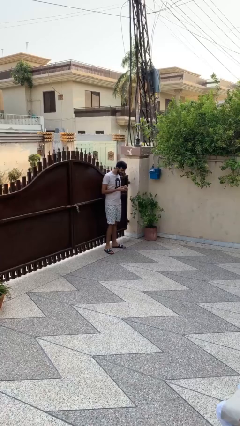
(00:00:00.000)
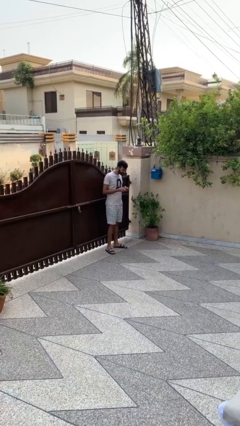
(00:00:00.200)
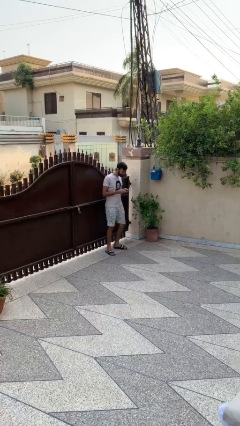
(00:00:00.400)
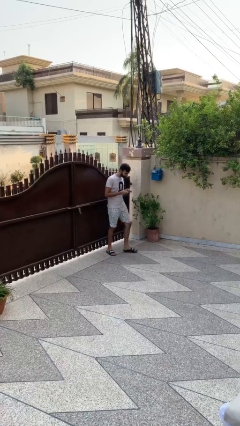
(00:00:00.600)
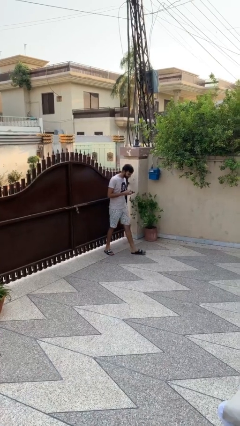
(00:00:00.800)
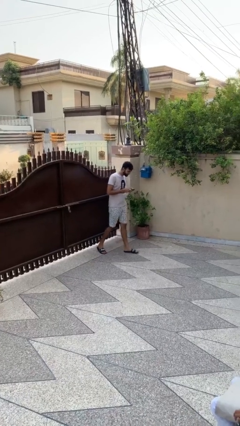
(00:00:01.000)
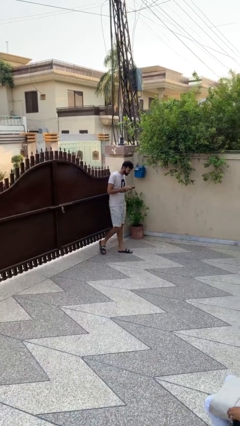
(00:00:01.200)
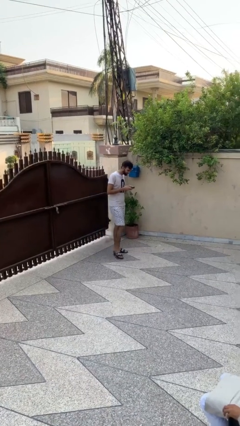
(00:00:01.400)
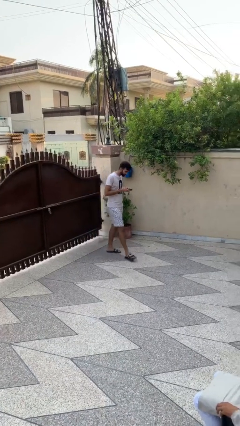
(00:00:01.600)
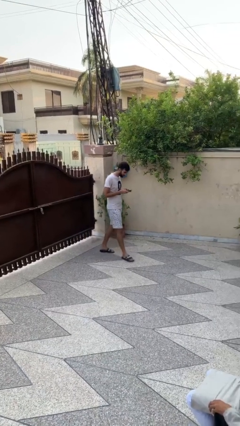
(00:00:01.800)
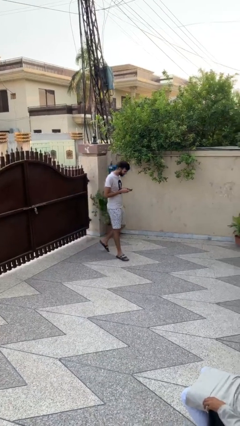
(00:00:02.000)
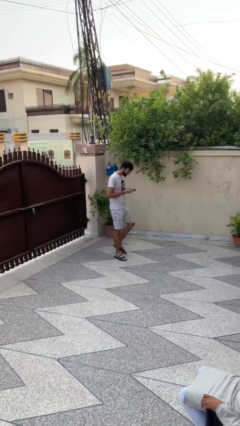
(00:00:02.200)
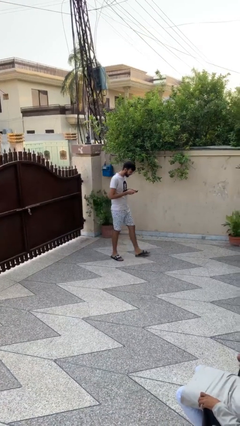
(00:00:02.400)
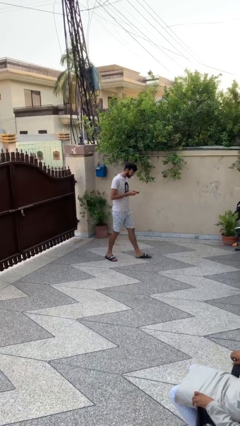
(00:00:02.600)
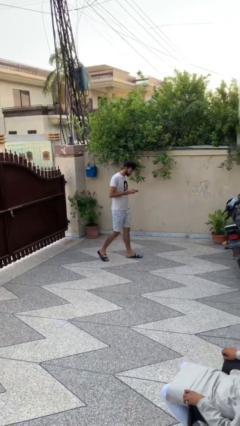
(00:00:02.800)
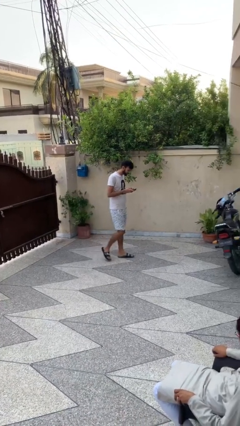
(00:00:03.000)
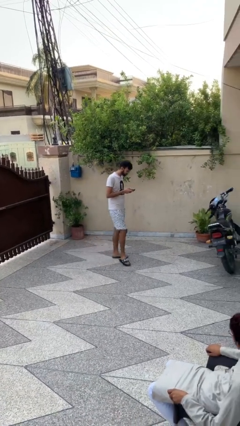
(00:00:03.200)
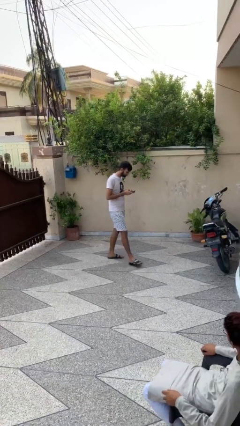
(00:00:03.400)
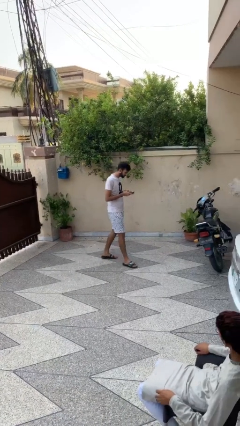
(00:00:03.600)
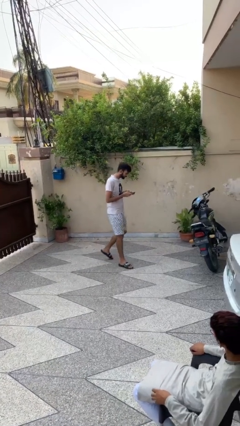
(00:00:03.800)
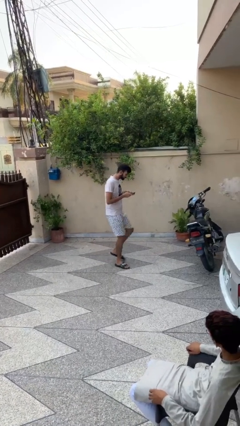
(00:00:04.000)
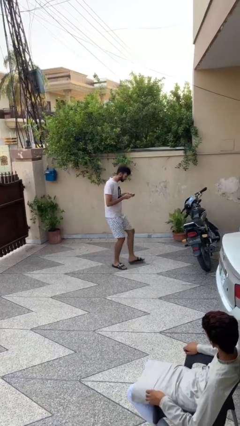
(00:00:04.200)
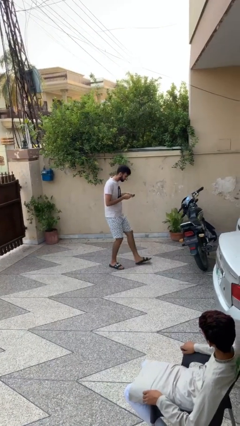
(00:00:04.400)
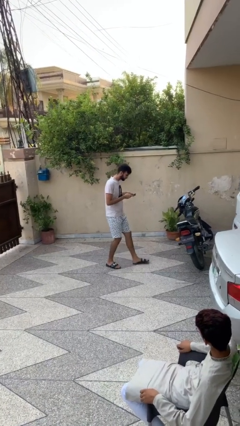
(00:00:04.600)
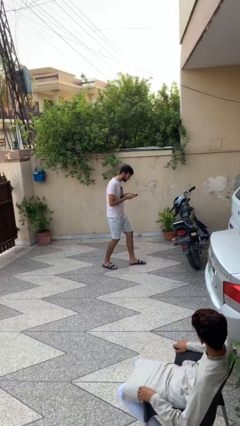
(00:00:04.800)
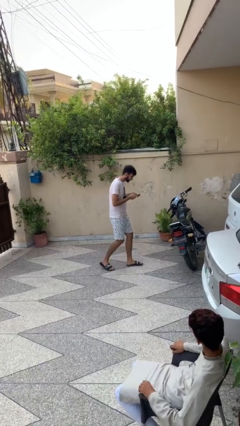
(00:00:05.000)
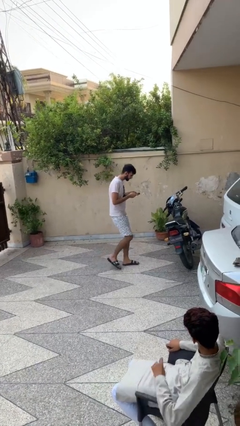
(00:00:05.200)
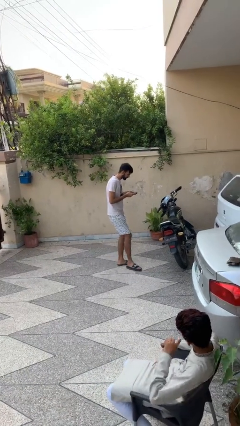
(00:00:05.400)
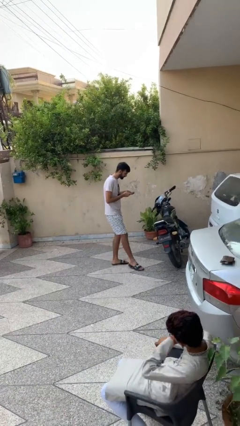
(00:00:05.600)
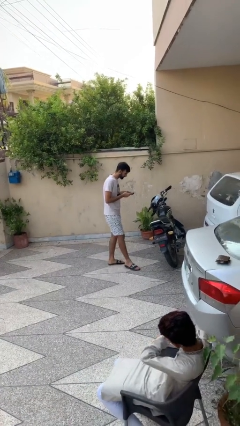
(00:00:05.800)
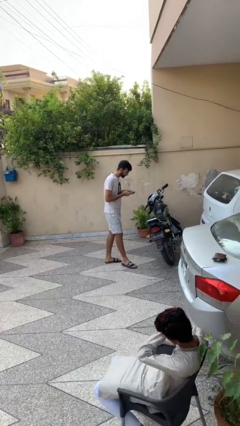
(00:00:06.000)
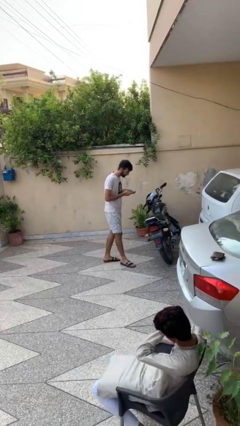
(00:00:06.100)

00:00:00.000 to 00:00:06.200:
person texts on phone

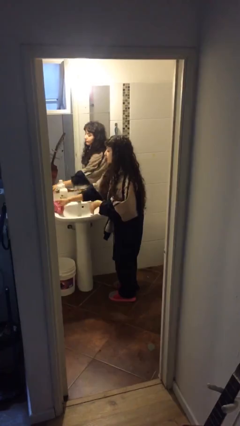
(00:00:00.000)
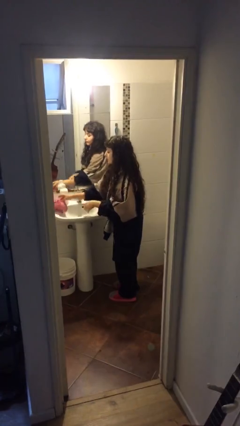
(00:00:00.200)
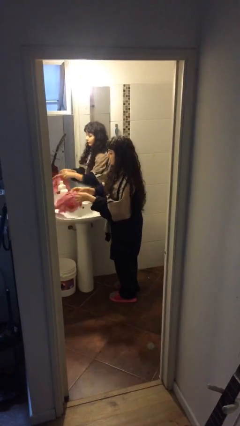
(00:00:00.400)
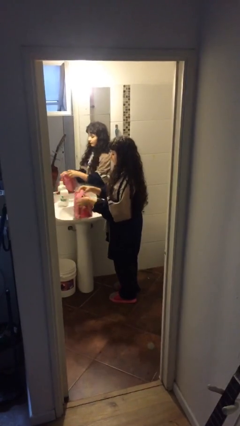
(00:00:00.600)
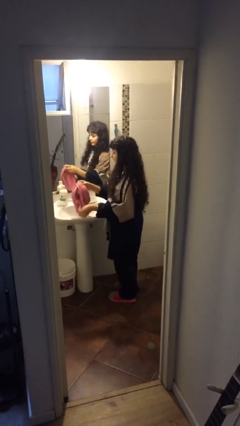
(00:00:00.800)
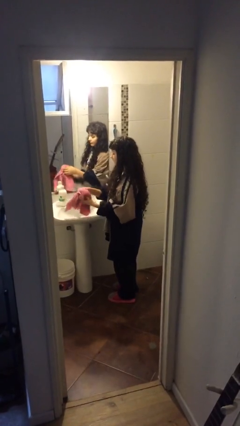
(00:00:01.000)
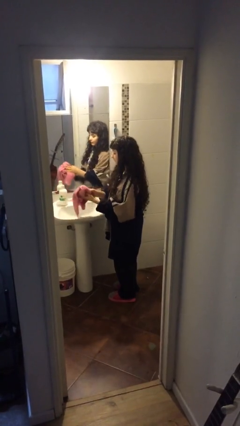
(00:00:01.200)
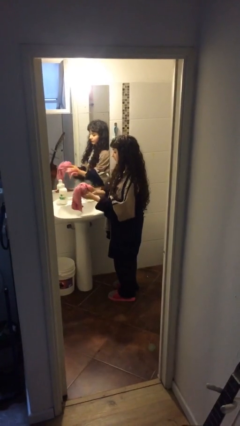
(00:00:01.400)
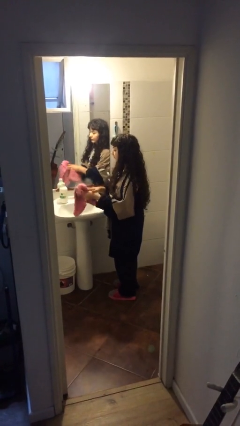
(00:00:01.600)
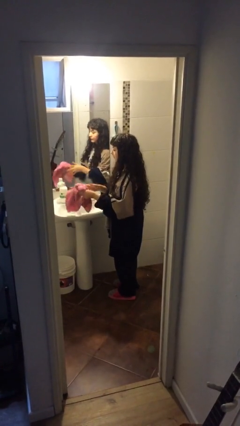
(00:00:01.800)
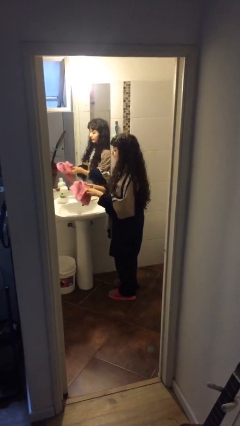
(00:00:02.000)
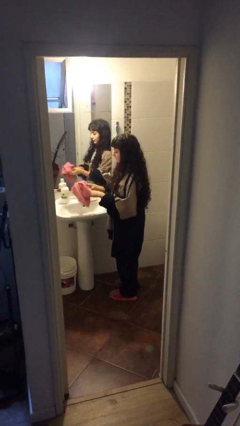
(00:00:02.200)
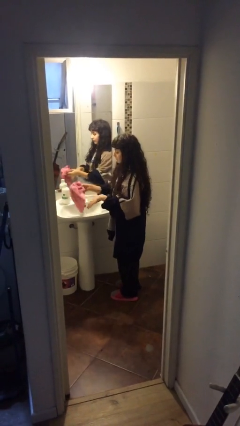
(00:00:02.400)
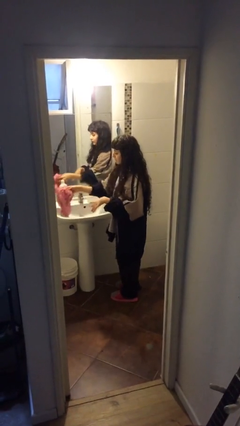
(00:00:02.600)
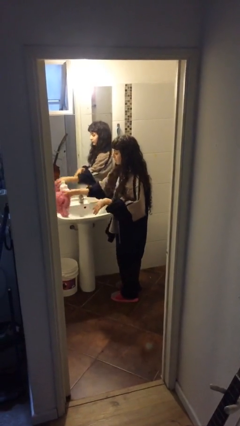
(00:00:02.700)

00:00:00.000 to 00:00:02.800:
person dries hands with towel

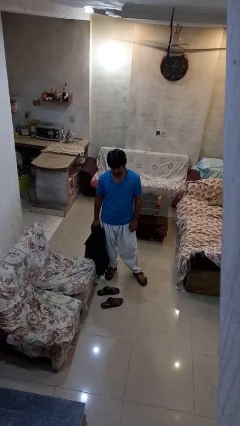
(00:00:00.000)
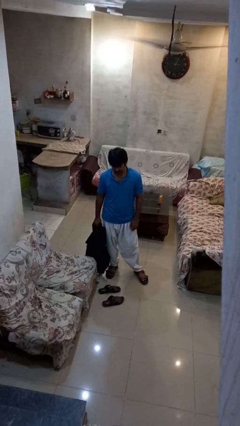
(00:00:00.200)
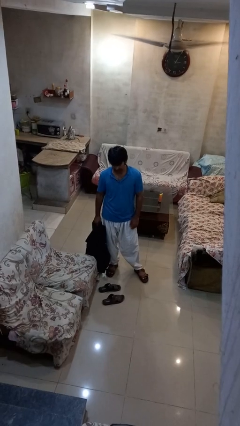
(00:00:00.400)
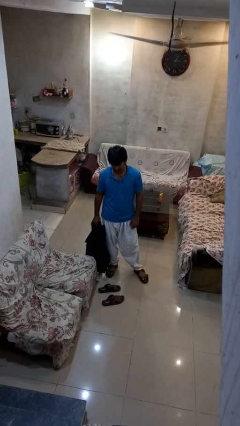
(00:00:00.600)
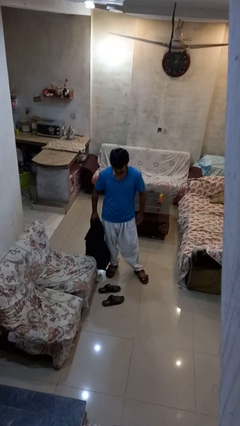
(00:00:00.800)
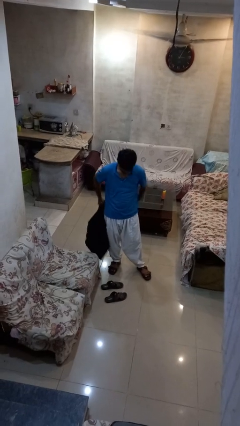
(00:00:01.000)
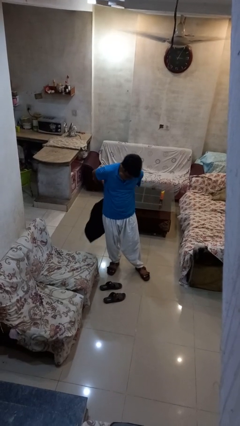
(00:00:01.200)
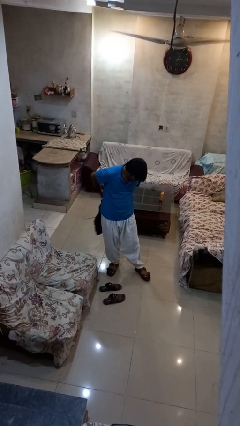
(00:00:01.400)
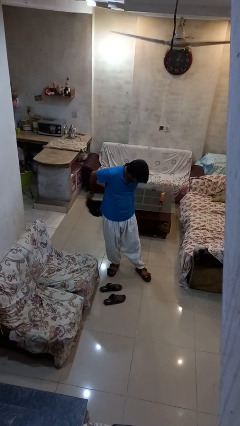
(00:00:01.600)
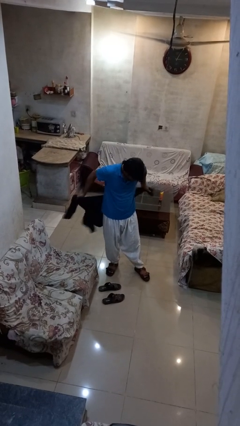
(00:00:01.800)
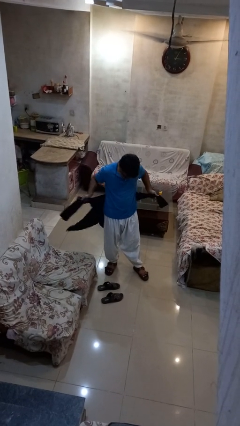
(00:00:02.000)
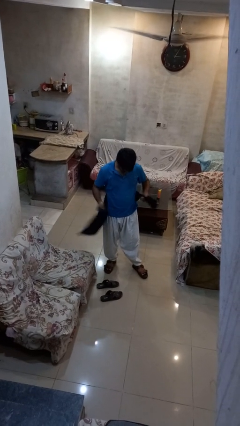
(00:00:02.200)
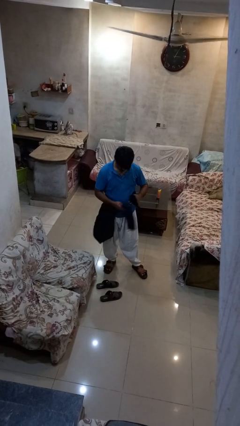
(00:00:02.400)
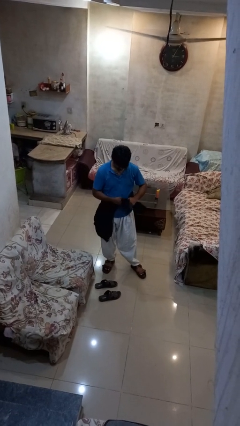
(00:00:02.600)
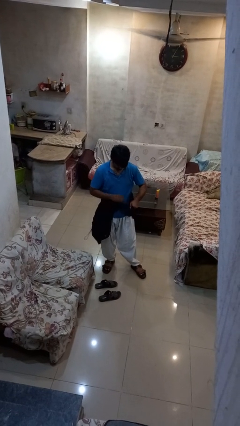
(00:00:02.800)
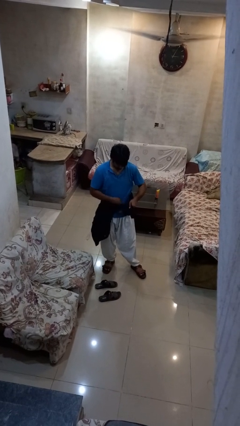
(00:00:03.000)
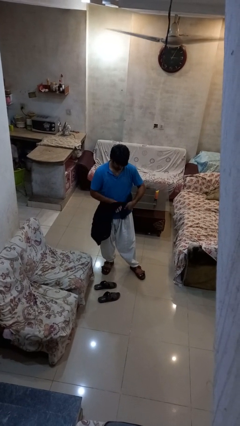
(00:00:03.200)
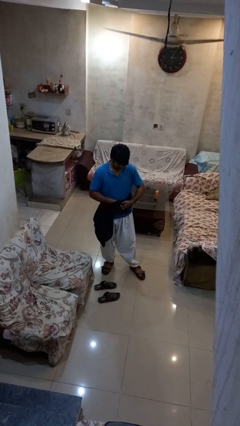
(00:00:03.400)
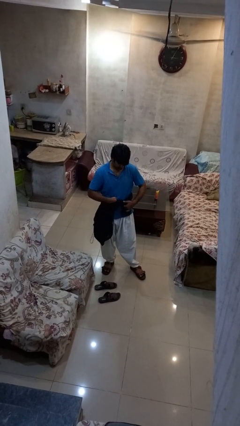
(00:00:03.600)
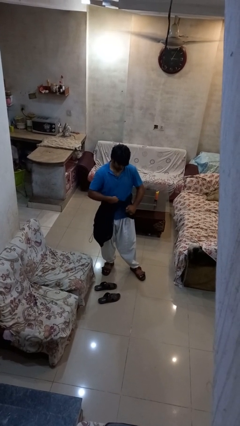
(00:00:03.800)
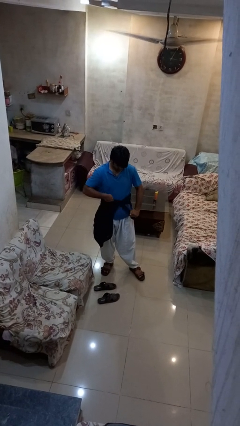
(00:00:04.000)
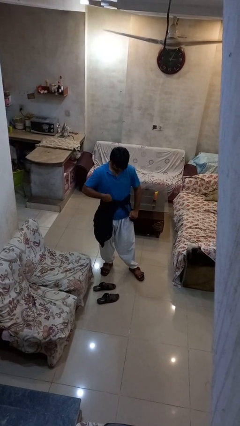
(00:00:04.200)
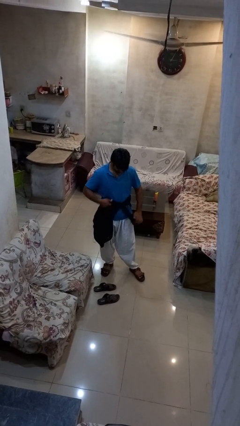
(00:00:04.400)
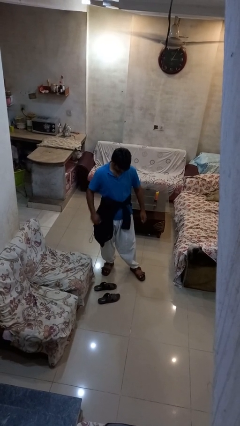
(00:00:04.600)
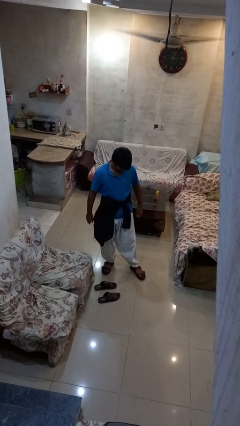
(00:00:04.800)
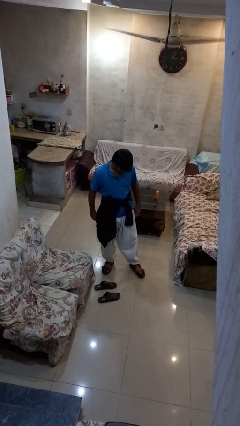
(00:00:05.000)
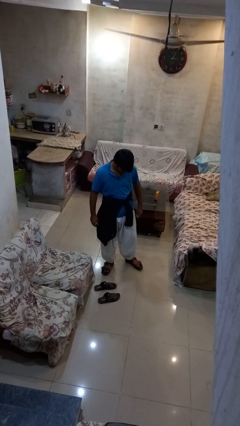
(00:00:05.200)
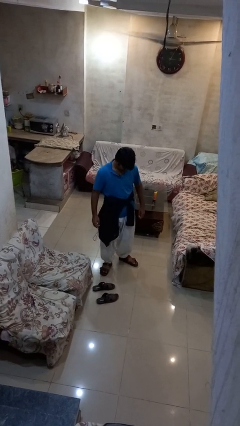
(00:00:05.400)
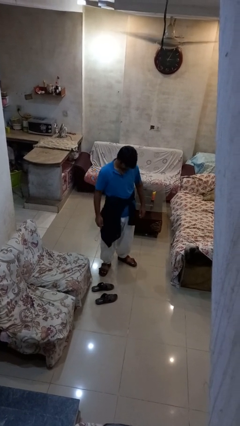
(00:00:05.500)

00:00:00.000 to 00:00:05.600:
person ties jacket around waist

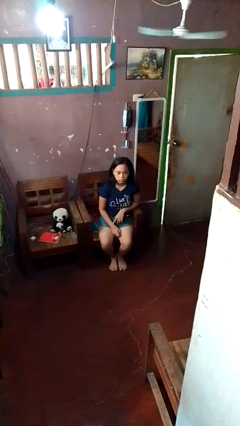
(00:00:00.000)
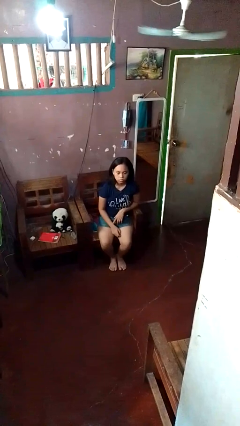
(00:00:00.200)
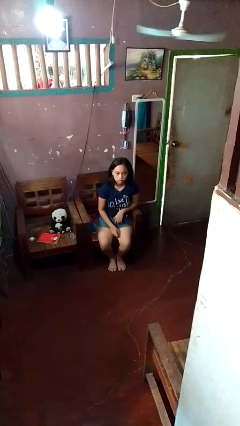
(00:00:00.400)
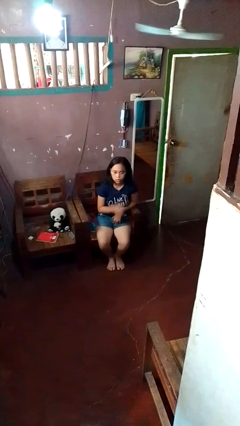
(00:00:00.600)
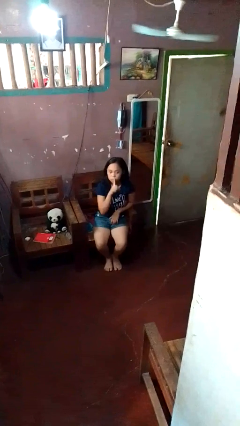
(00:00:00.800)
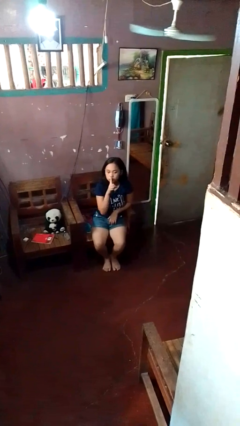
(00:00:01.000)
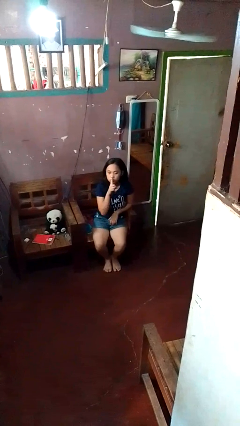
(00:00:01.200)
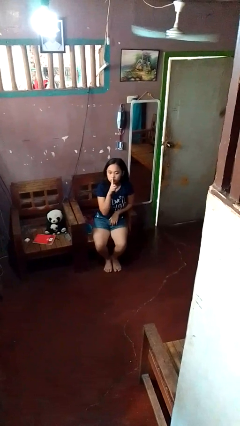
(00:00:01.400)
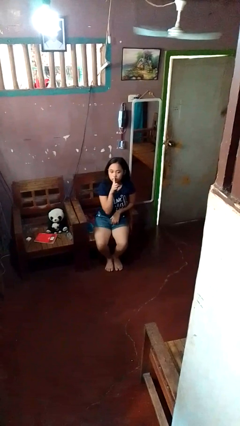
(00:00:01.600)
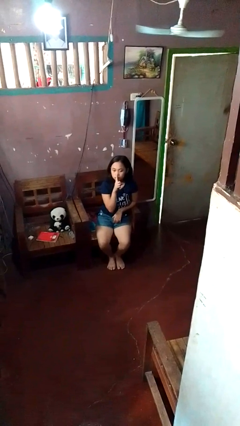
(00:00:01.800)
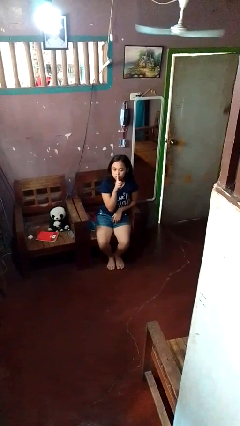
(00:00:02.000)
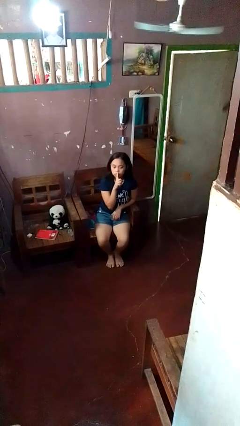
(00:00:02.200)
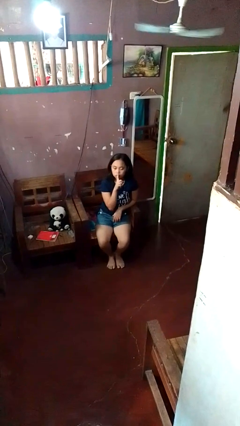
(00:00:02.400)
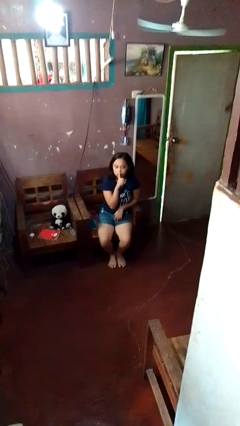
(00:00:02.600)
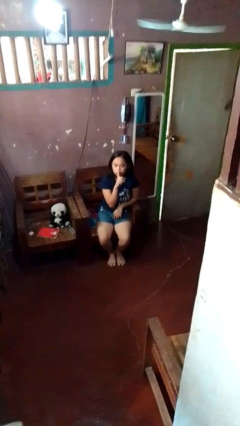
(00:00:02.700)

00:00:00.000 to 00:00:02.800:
person gestures be quiet

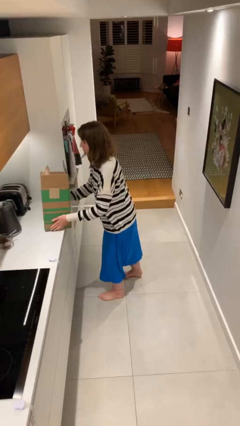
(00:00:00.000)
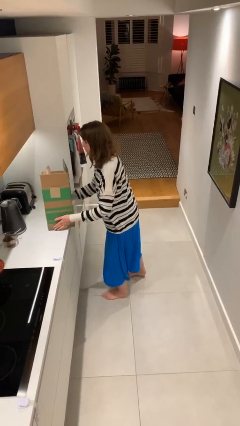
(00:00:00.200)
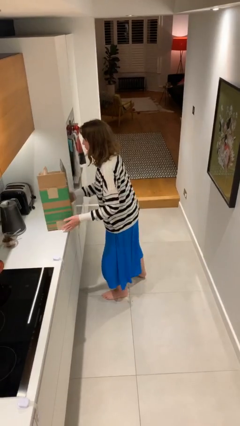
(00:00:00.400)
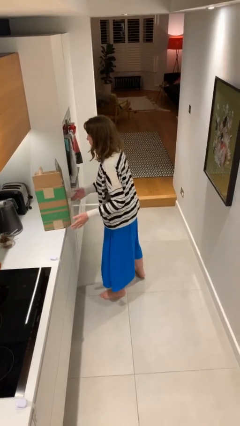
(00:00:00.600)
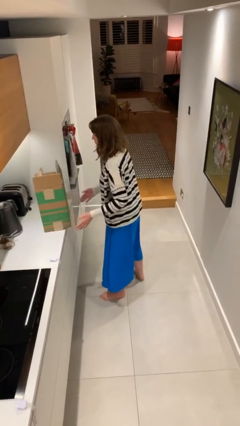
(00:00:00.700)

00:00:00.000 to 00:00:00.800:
person puts down object on table
